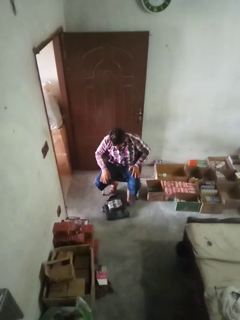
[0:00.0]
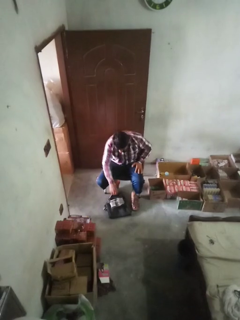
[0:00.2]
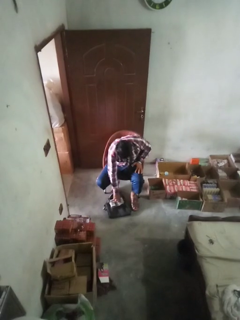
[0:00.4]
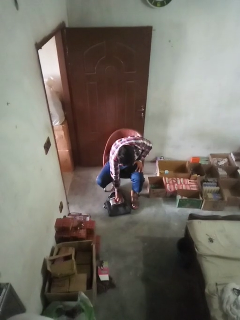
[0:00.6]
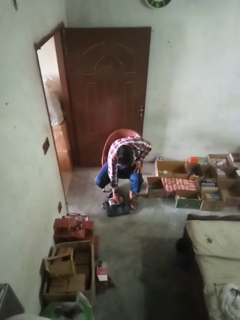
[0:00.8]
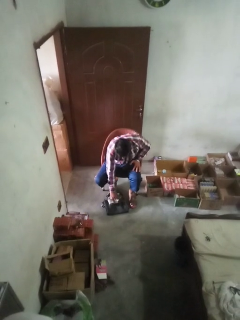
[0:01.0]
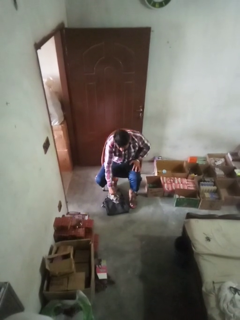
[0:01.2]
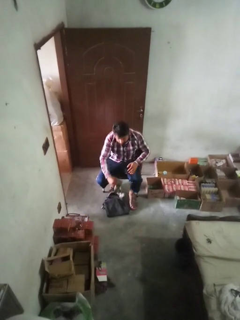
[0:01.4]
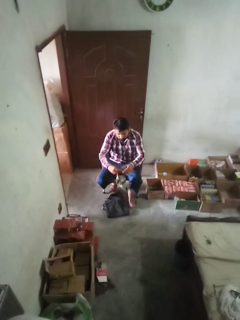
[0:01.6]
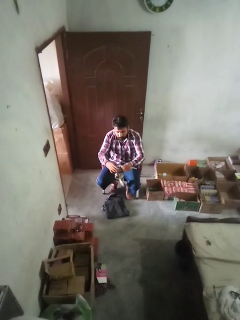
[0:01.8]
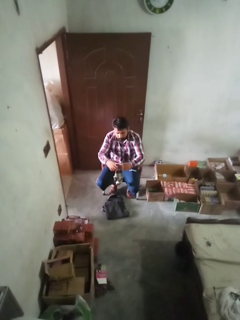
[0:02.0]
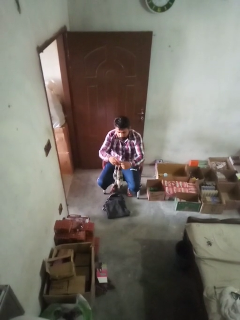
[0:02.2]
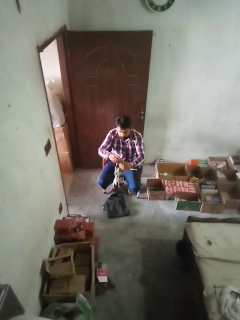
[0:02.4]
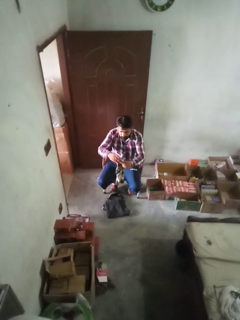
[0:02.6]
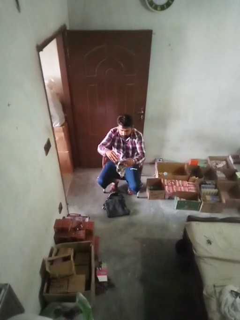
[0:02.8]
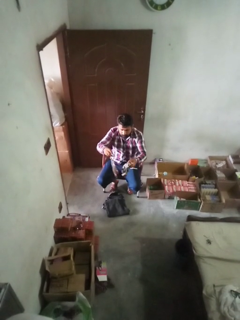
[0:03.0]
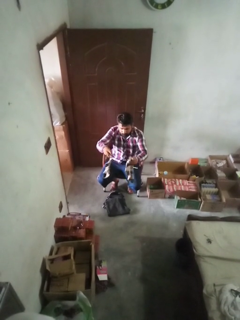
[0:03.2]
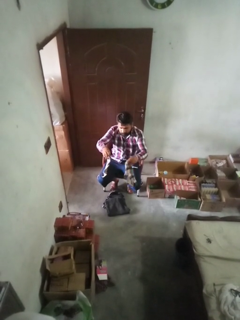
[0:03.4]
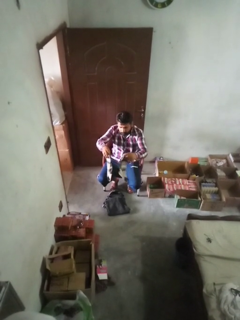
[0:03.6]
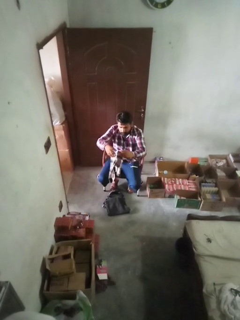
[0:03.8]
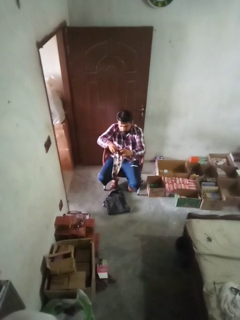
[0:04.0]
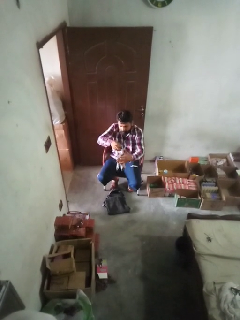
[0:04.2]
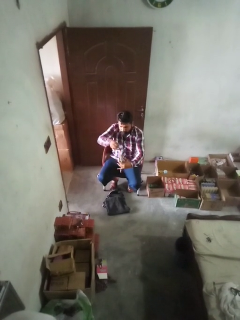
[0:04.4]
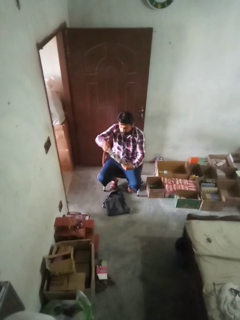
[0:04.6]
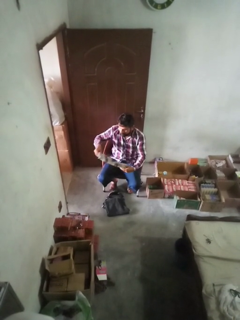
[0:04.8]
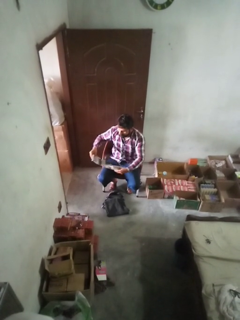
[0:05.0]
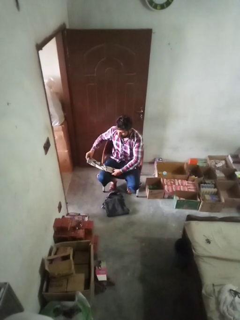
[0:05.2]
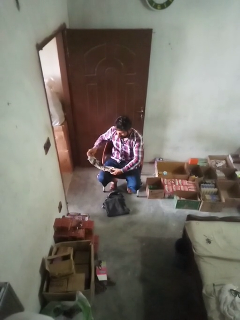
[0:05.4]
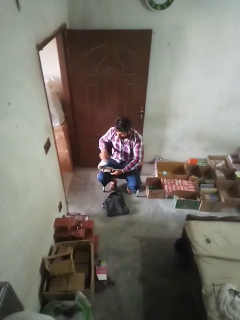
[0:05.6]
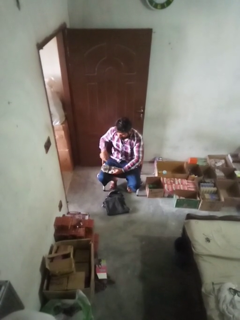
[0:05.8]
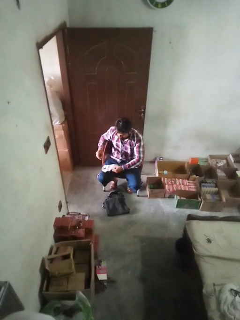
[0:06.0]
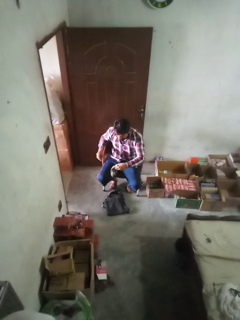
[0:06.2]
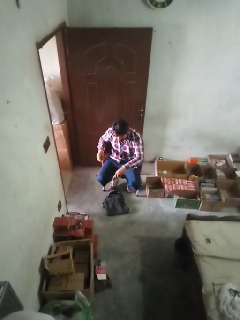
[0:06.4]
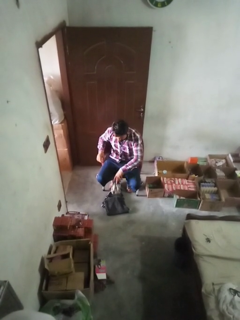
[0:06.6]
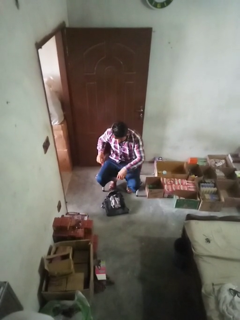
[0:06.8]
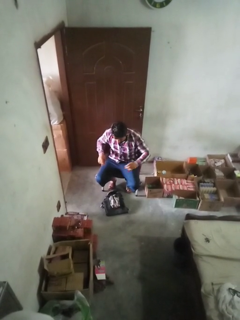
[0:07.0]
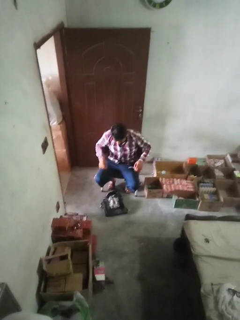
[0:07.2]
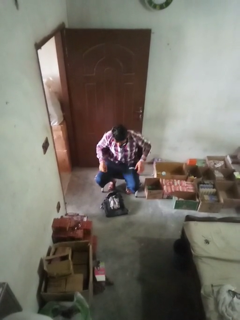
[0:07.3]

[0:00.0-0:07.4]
person folds socks

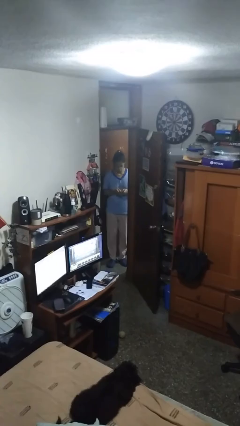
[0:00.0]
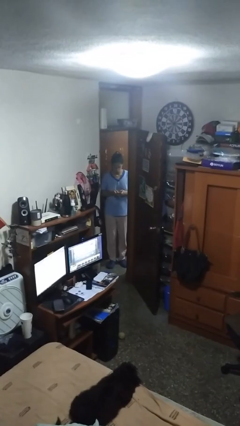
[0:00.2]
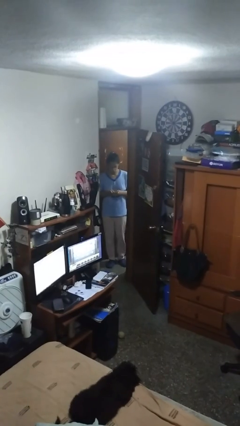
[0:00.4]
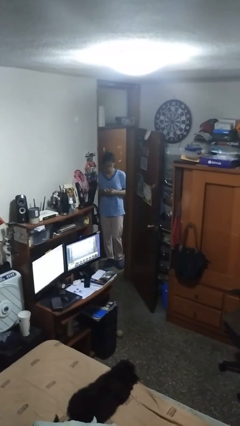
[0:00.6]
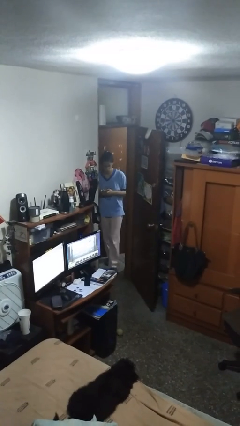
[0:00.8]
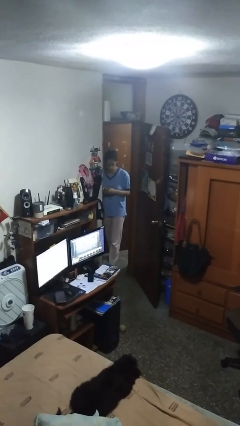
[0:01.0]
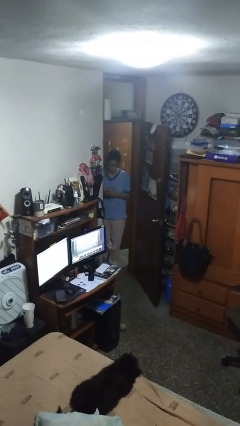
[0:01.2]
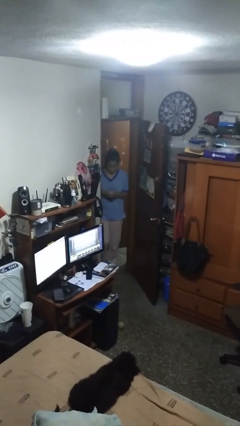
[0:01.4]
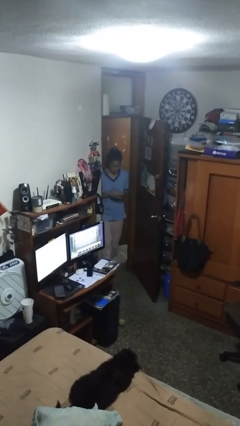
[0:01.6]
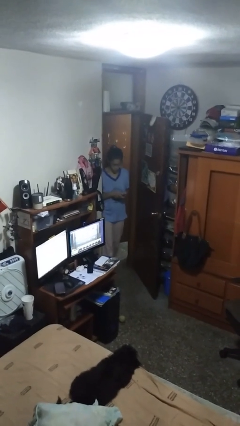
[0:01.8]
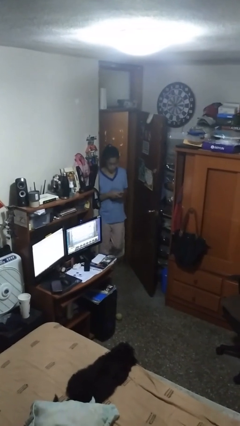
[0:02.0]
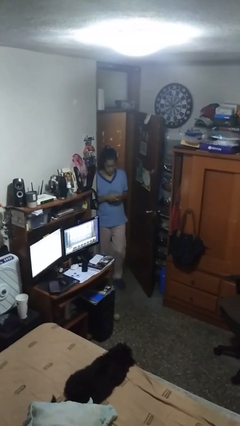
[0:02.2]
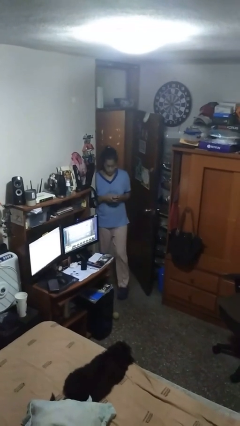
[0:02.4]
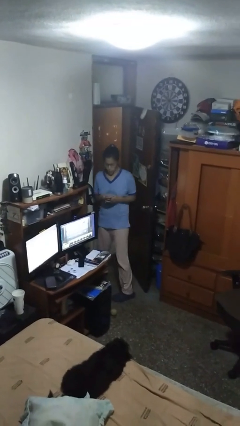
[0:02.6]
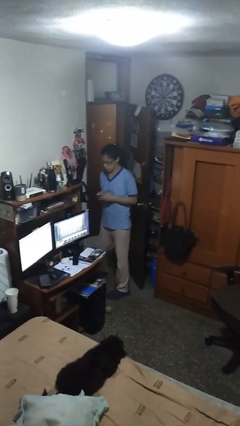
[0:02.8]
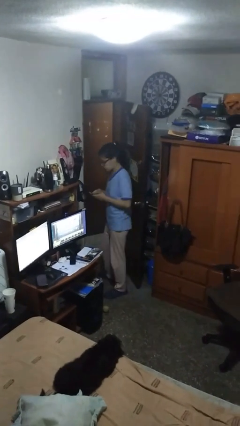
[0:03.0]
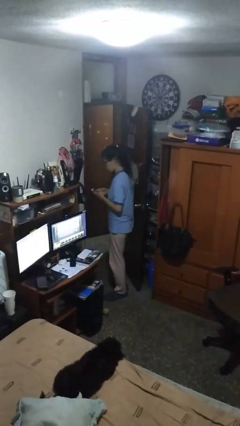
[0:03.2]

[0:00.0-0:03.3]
person enters scene through structure

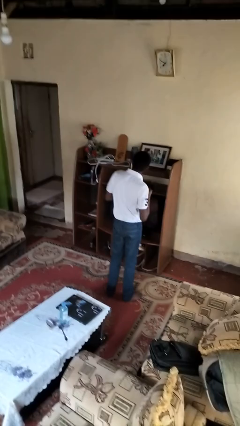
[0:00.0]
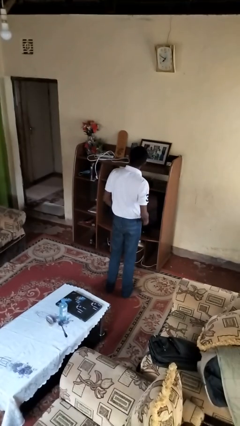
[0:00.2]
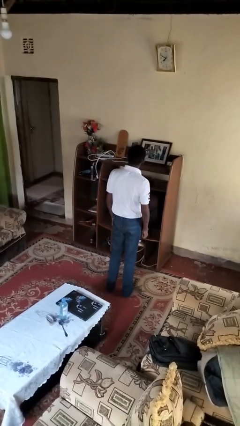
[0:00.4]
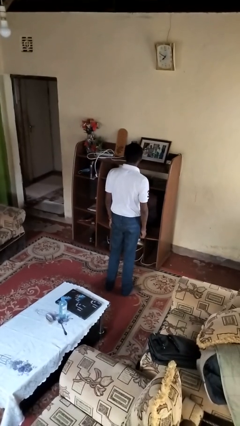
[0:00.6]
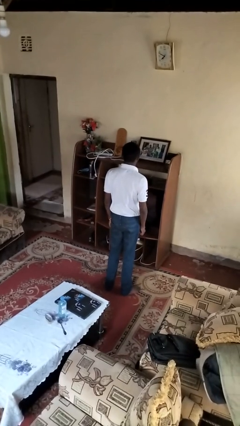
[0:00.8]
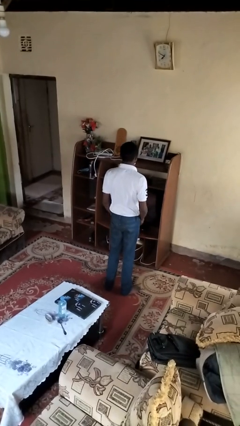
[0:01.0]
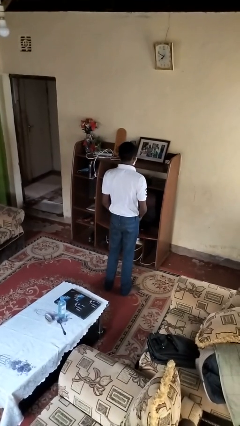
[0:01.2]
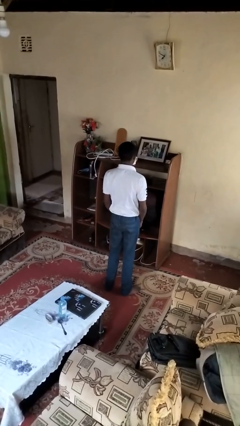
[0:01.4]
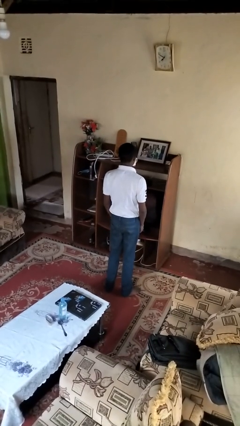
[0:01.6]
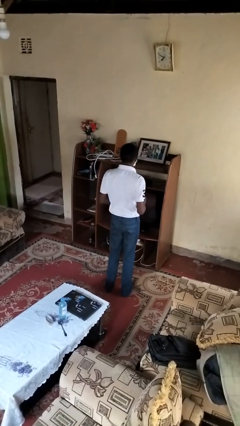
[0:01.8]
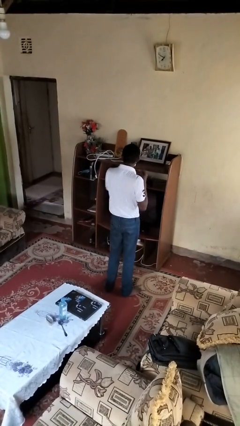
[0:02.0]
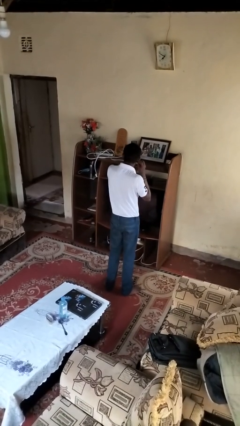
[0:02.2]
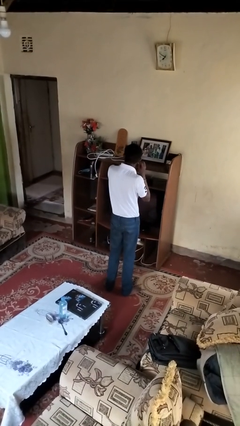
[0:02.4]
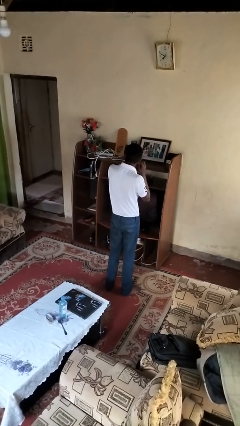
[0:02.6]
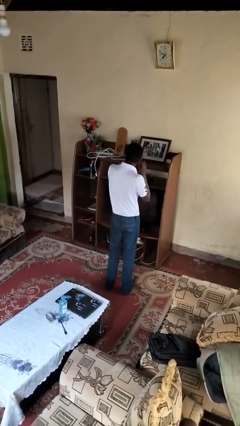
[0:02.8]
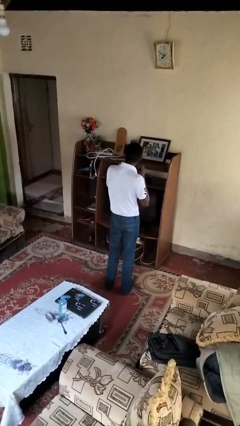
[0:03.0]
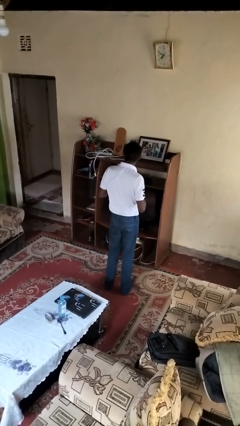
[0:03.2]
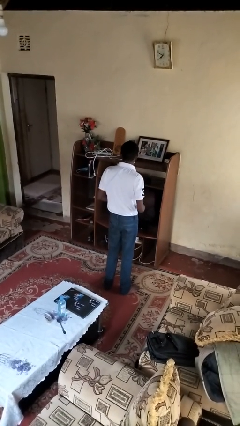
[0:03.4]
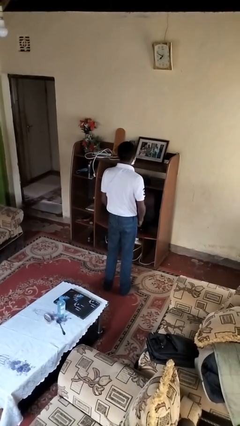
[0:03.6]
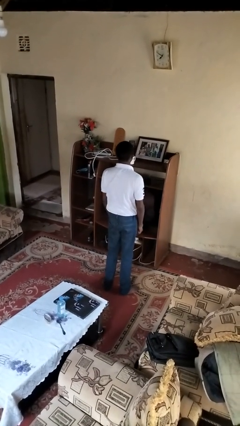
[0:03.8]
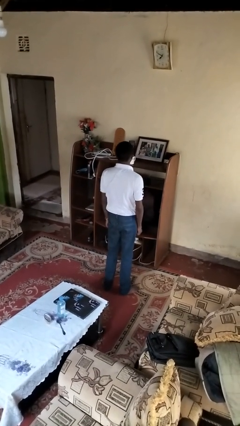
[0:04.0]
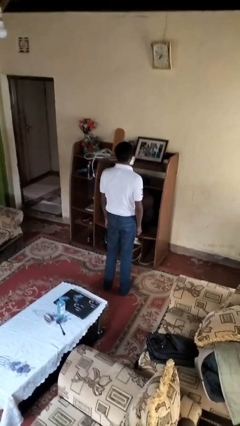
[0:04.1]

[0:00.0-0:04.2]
person takes off earrings

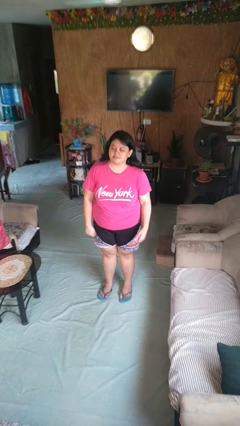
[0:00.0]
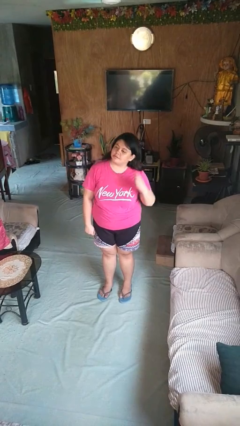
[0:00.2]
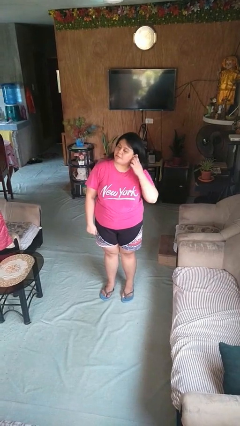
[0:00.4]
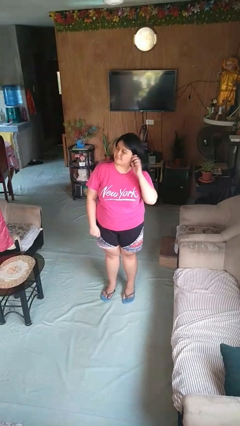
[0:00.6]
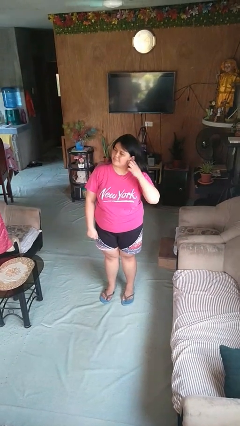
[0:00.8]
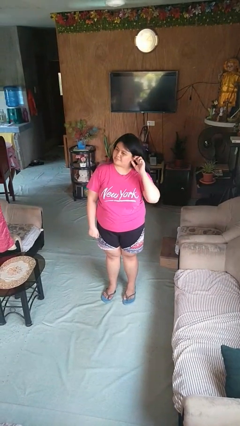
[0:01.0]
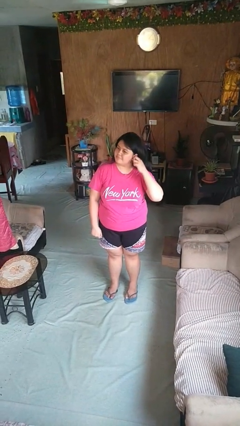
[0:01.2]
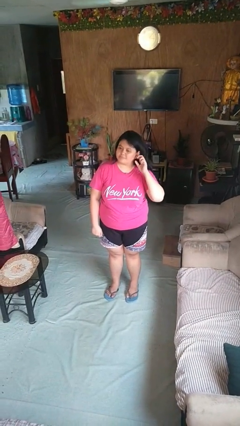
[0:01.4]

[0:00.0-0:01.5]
person touches earlobe

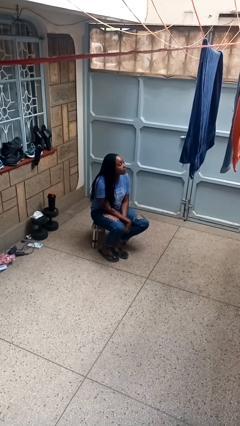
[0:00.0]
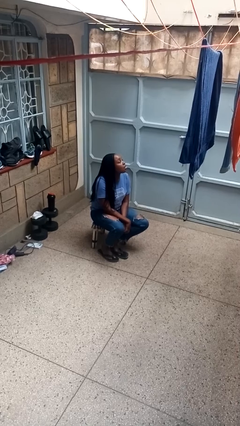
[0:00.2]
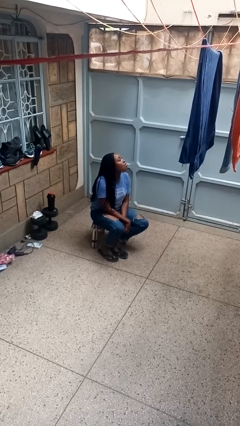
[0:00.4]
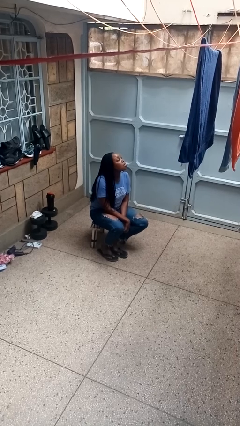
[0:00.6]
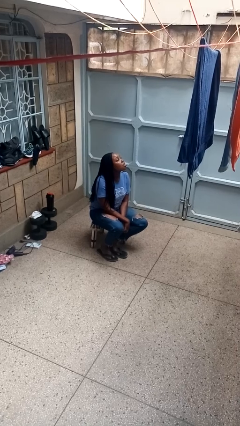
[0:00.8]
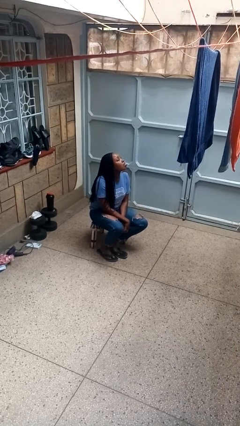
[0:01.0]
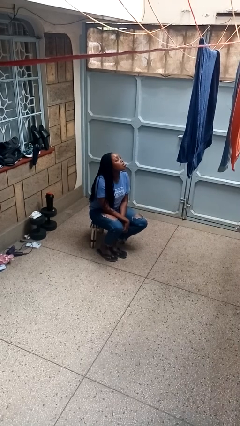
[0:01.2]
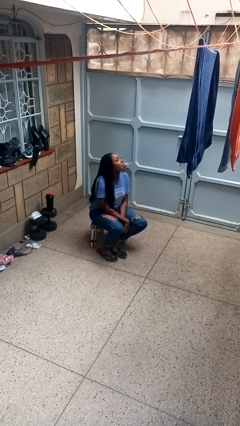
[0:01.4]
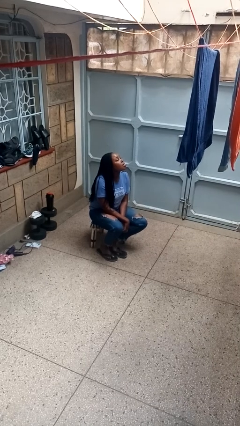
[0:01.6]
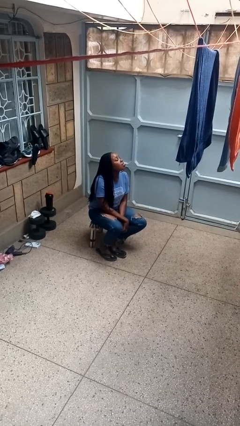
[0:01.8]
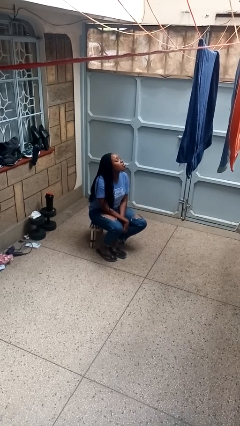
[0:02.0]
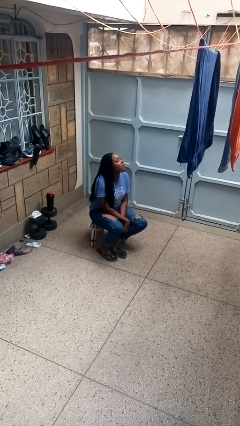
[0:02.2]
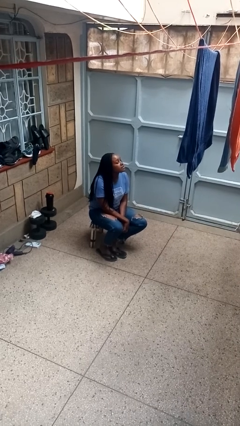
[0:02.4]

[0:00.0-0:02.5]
person sticks out tongue

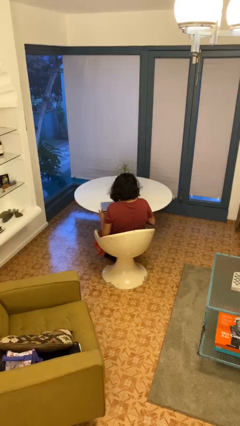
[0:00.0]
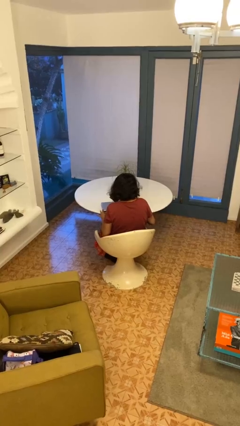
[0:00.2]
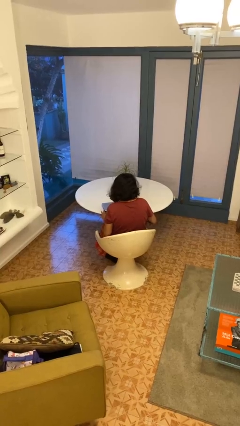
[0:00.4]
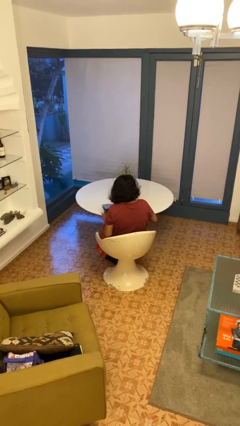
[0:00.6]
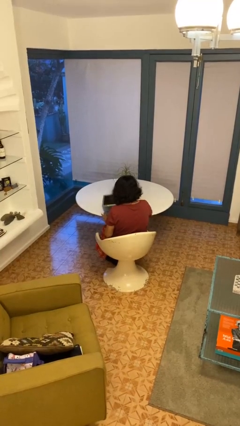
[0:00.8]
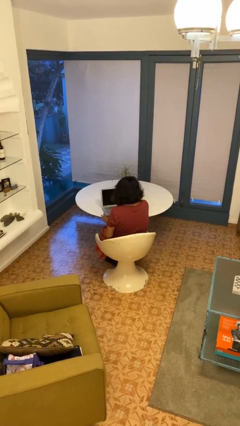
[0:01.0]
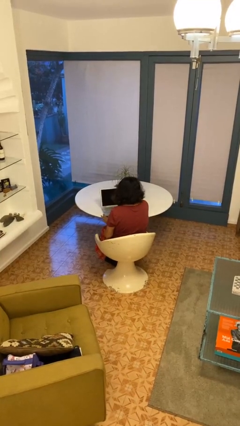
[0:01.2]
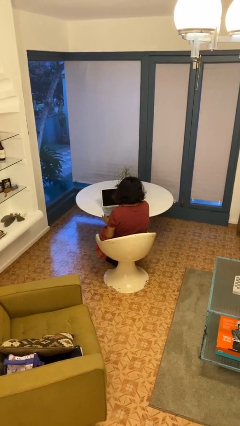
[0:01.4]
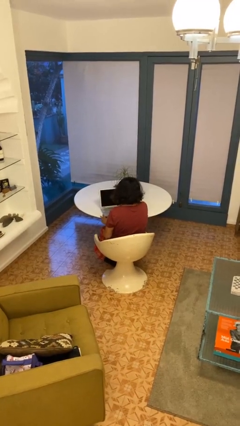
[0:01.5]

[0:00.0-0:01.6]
person opens laptop
